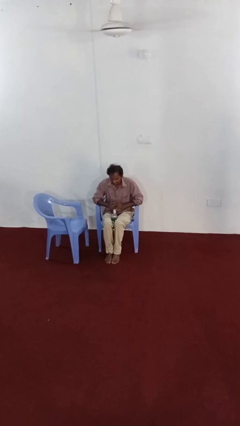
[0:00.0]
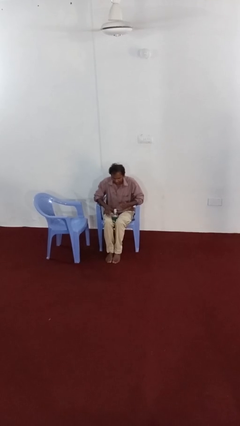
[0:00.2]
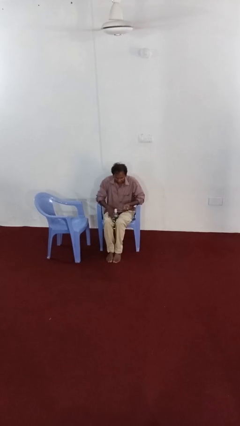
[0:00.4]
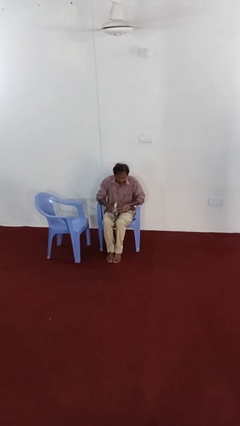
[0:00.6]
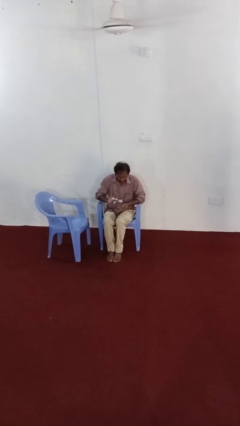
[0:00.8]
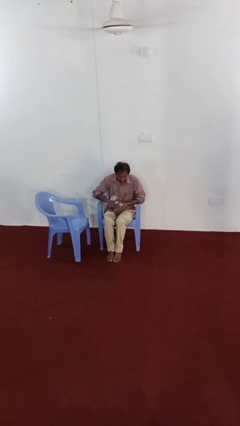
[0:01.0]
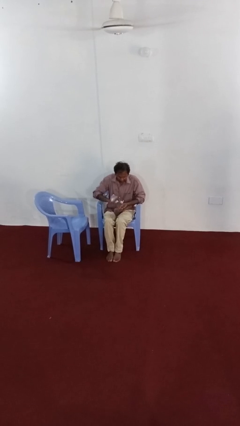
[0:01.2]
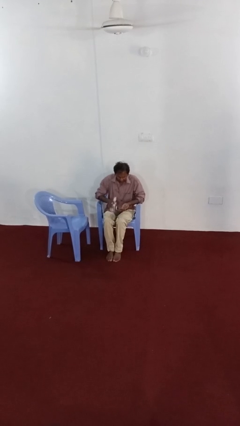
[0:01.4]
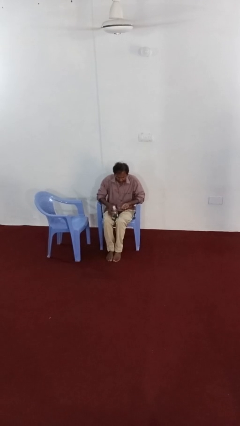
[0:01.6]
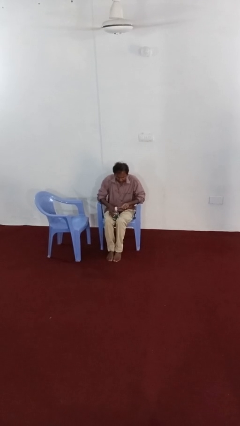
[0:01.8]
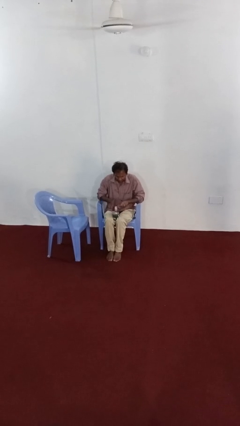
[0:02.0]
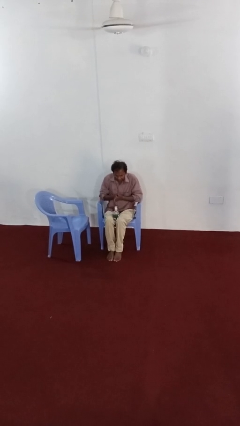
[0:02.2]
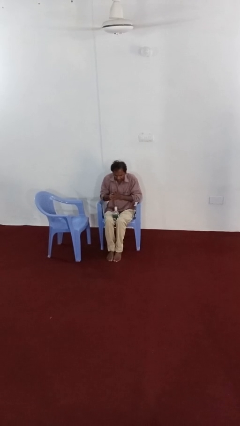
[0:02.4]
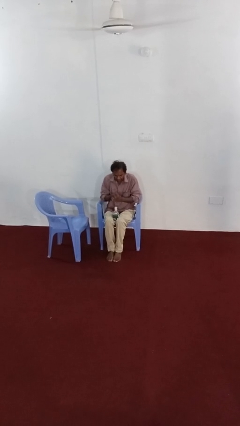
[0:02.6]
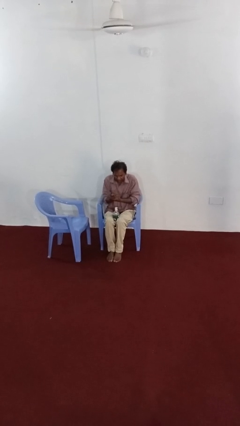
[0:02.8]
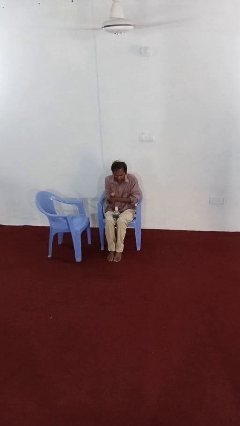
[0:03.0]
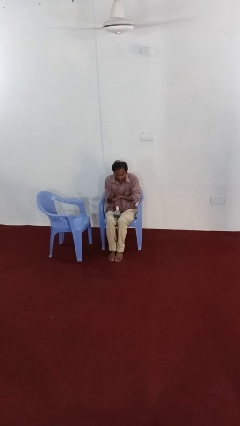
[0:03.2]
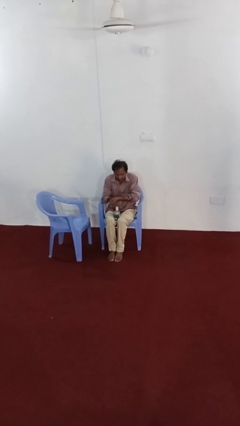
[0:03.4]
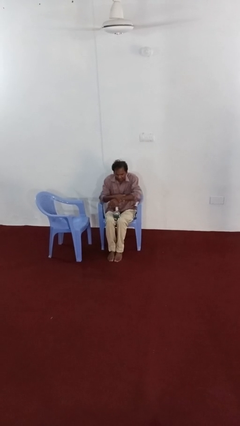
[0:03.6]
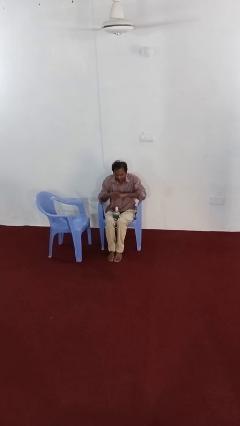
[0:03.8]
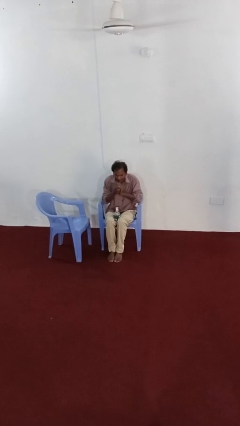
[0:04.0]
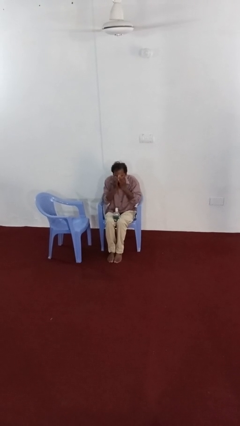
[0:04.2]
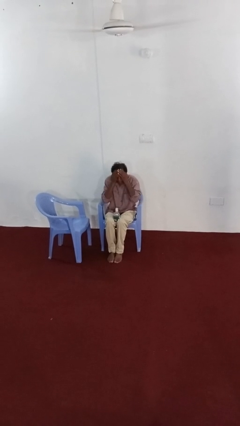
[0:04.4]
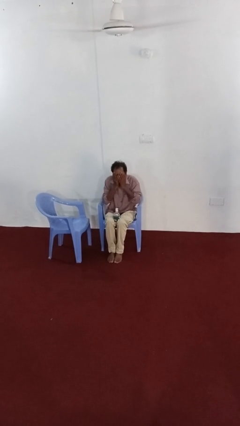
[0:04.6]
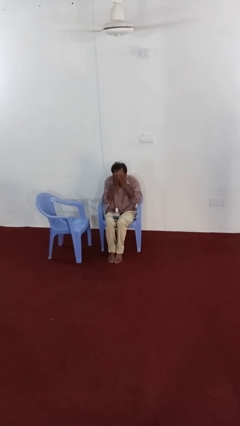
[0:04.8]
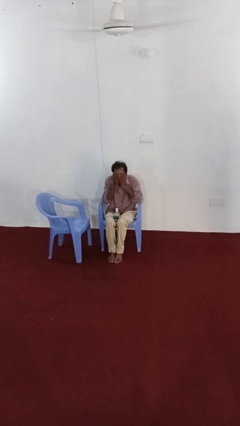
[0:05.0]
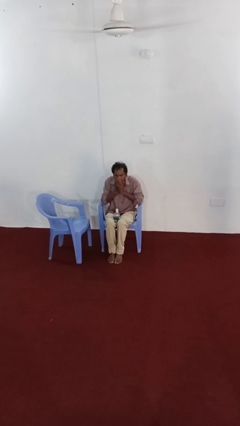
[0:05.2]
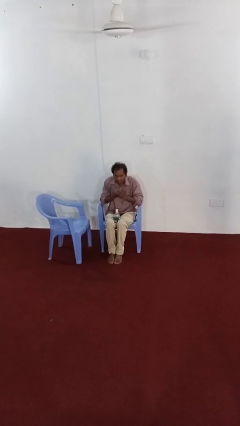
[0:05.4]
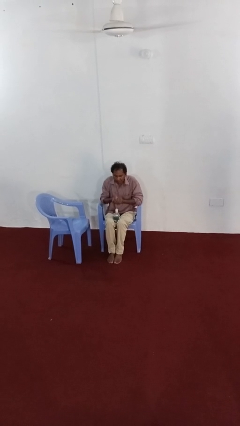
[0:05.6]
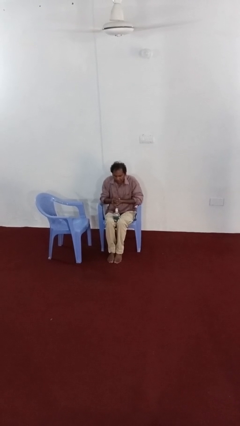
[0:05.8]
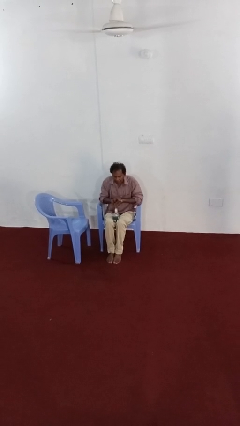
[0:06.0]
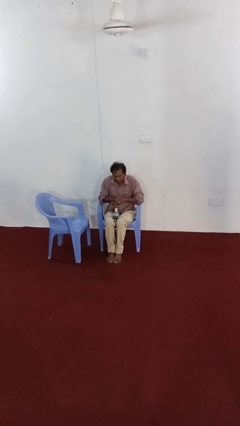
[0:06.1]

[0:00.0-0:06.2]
person applies sunscreen

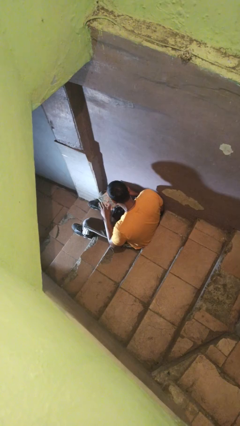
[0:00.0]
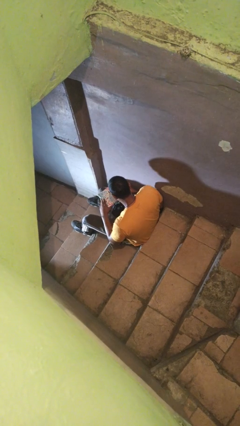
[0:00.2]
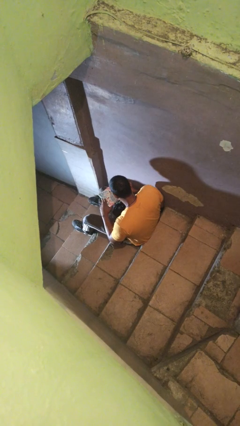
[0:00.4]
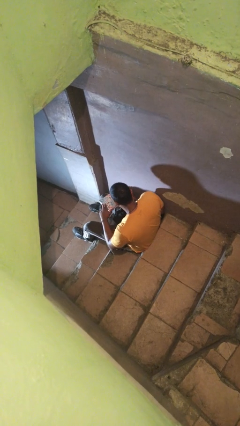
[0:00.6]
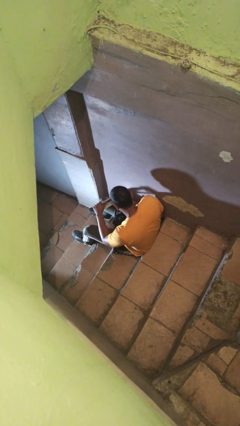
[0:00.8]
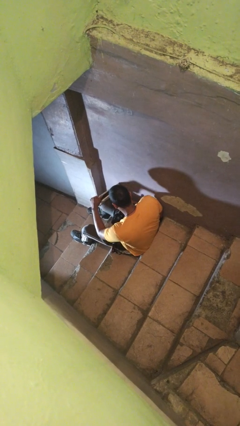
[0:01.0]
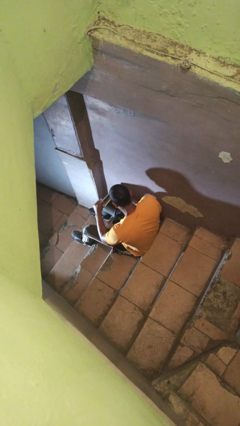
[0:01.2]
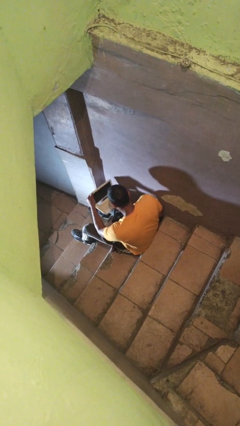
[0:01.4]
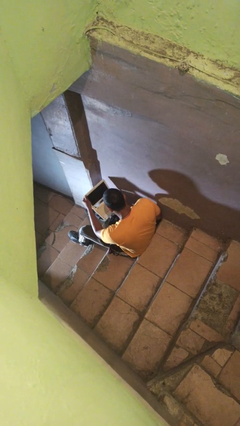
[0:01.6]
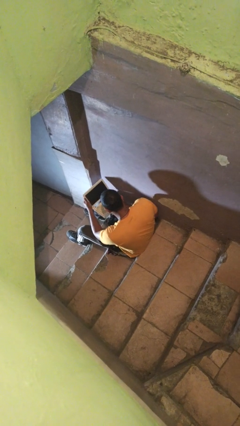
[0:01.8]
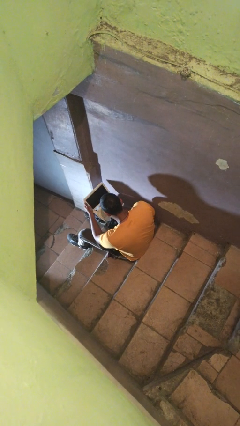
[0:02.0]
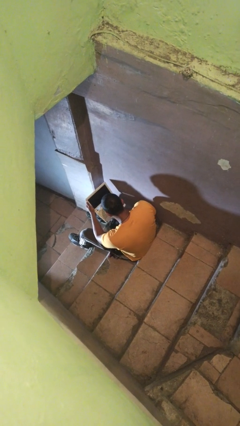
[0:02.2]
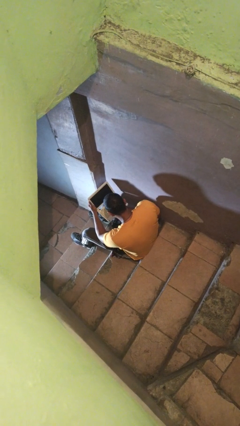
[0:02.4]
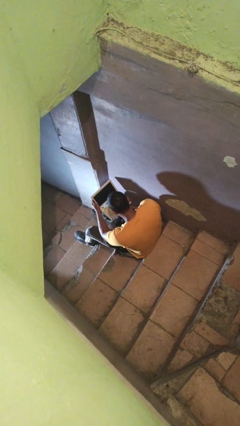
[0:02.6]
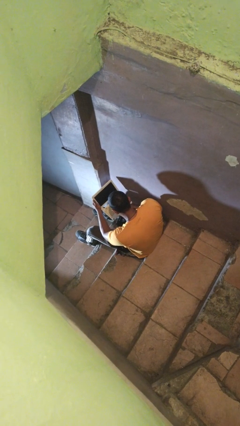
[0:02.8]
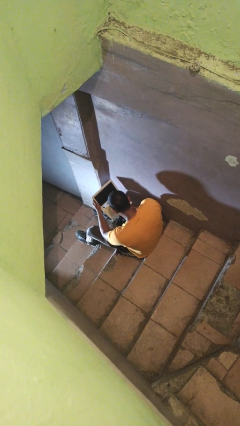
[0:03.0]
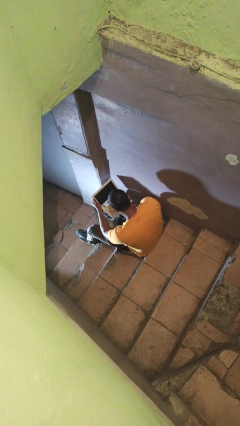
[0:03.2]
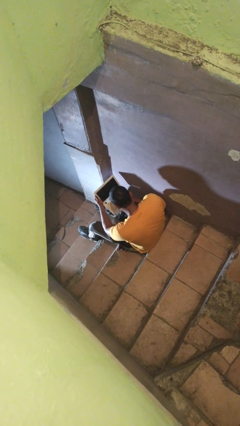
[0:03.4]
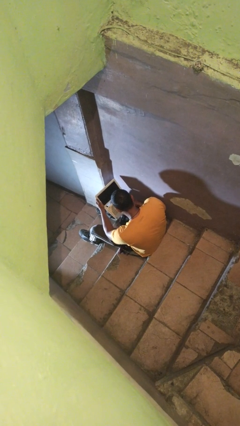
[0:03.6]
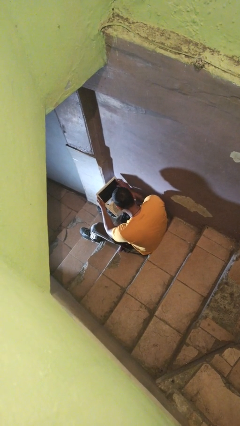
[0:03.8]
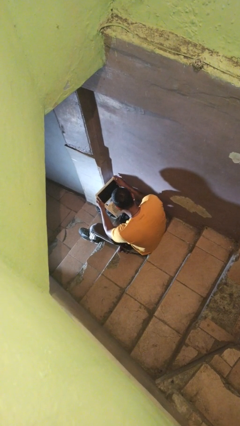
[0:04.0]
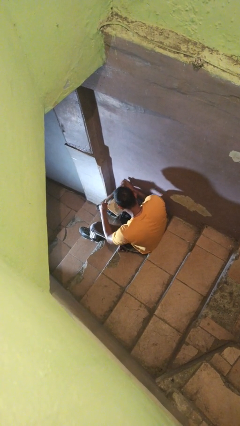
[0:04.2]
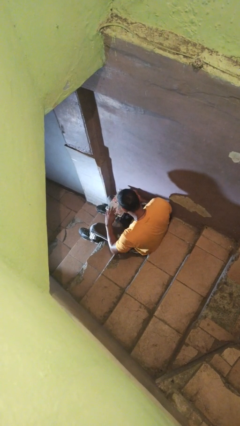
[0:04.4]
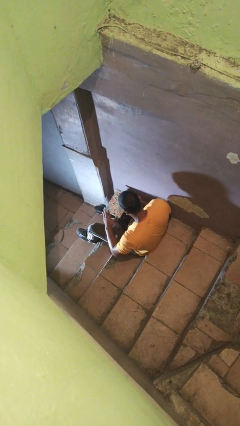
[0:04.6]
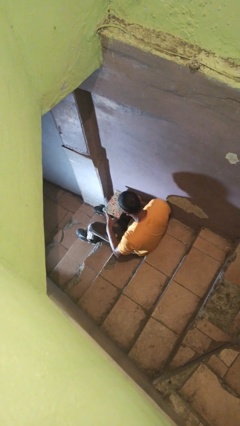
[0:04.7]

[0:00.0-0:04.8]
person interacts with laptop

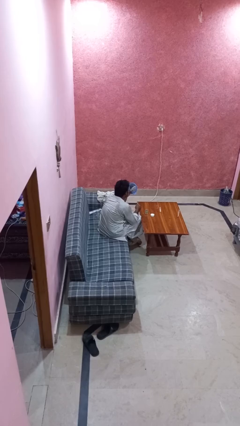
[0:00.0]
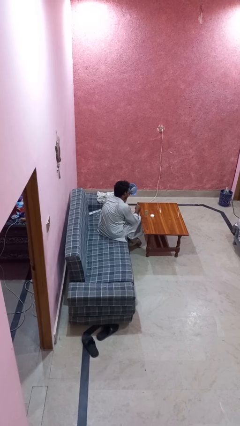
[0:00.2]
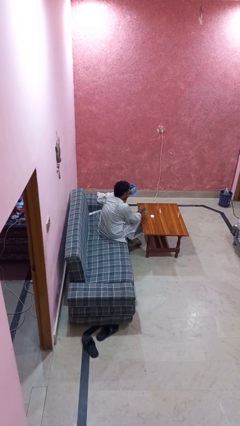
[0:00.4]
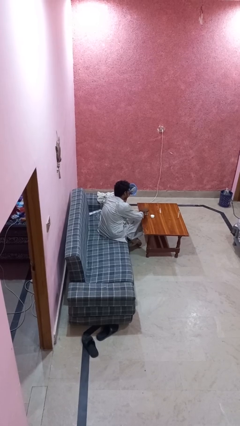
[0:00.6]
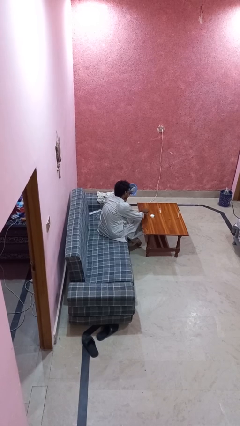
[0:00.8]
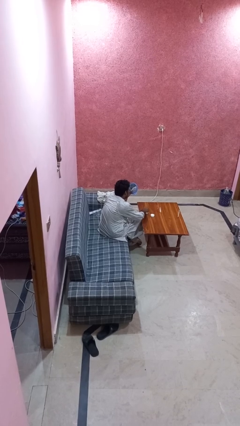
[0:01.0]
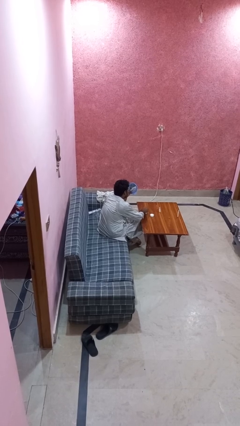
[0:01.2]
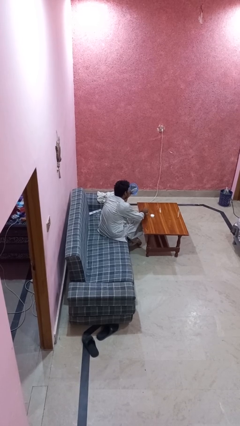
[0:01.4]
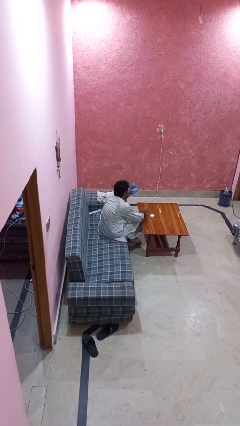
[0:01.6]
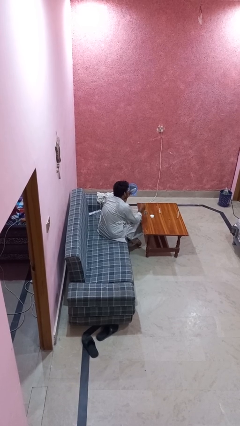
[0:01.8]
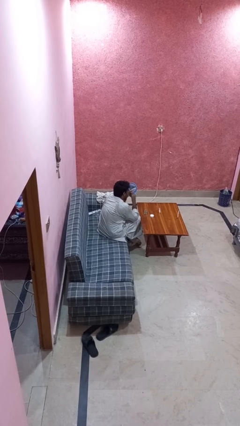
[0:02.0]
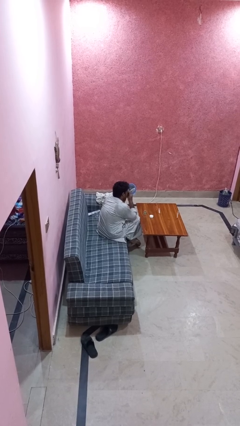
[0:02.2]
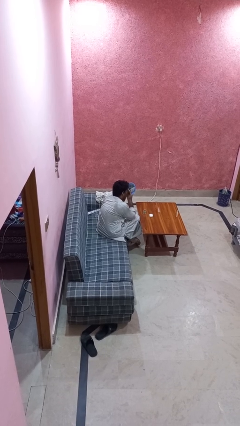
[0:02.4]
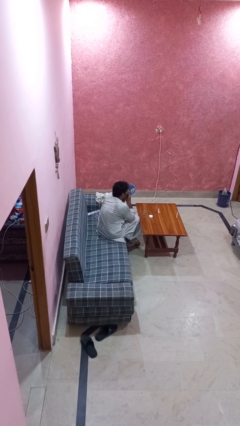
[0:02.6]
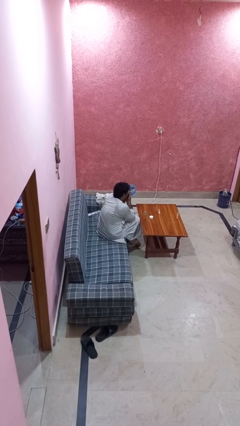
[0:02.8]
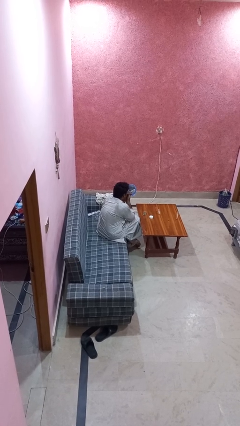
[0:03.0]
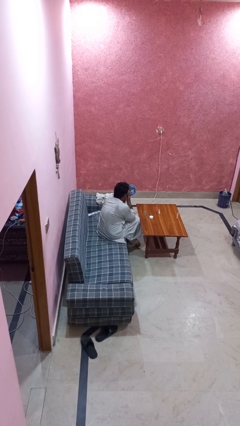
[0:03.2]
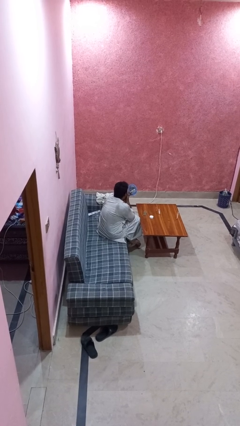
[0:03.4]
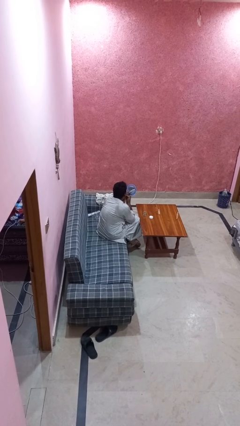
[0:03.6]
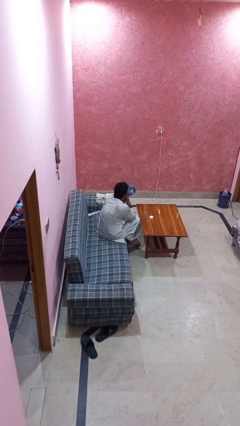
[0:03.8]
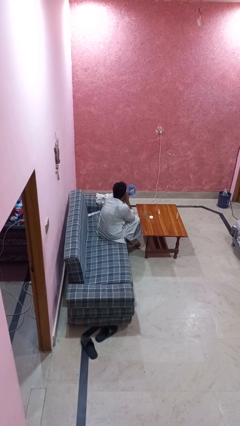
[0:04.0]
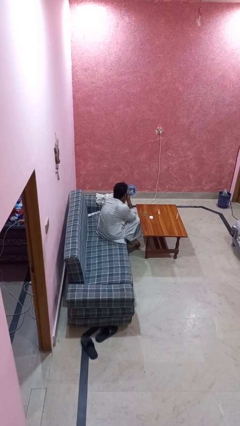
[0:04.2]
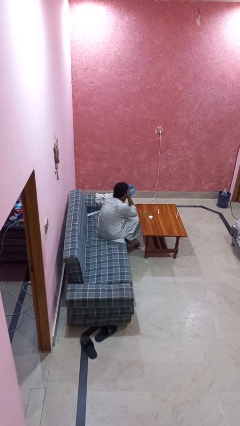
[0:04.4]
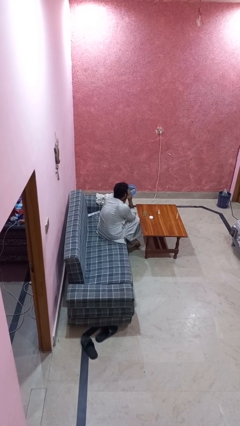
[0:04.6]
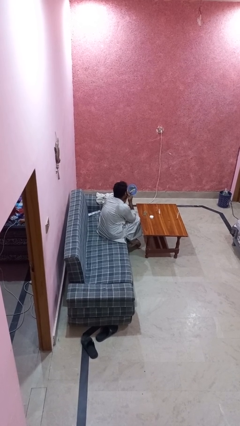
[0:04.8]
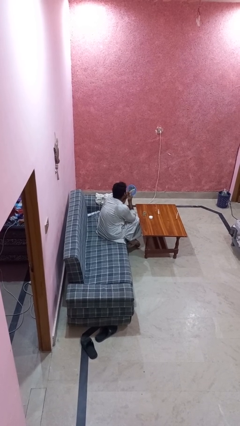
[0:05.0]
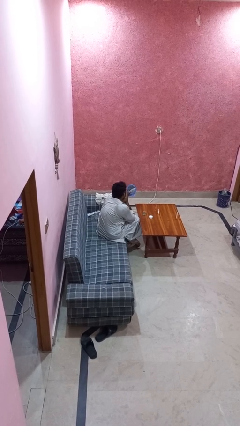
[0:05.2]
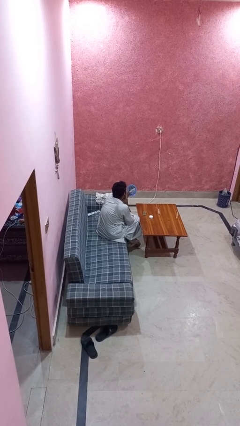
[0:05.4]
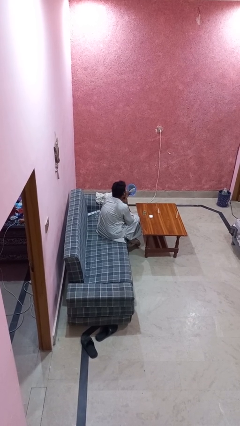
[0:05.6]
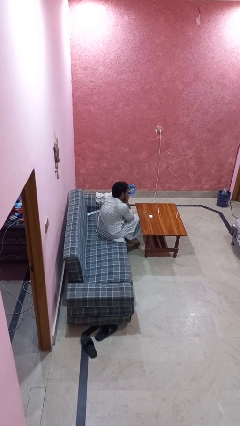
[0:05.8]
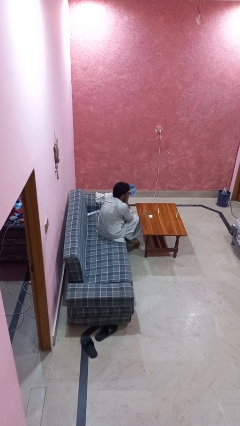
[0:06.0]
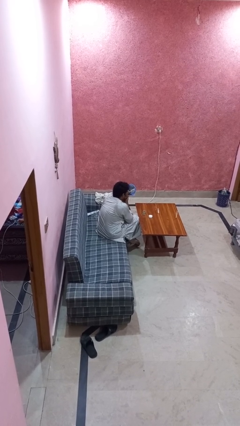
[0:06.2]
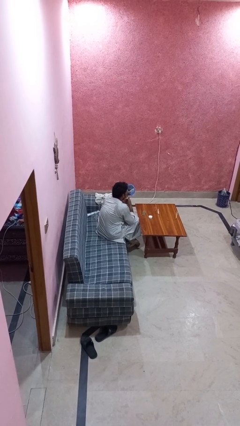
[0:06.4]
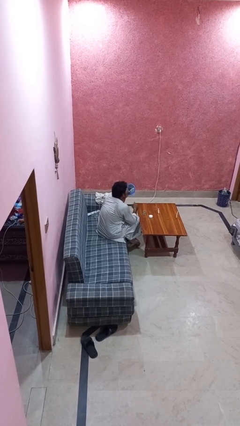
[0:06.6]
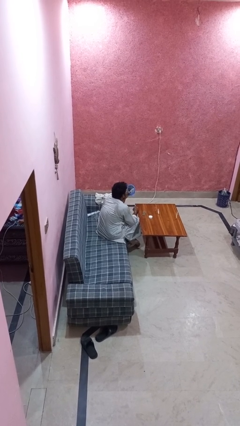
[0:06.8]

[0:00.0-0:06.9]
person applies foundation makeup

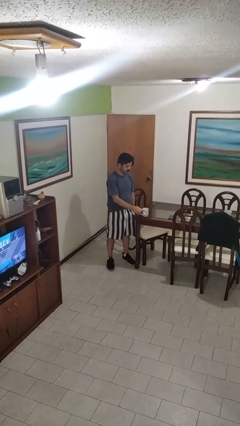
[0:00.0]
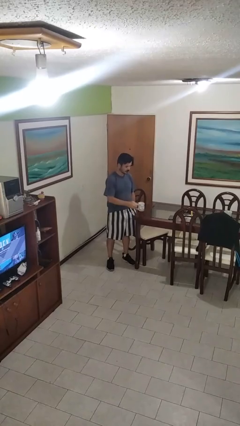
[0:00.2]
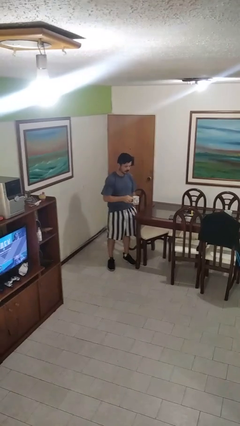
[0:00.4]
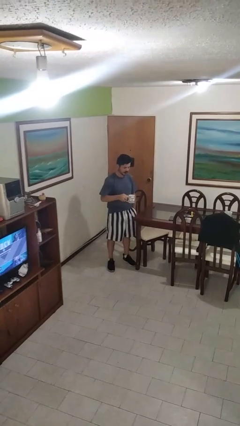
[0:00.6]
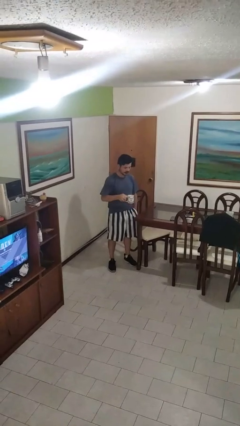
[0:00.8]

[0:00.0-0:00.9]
person picks up object from table
